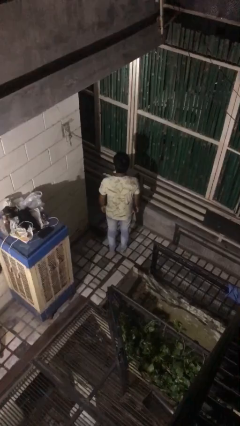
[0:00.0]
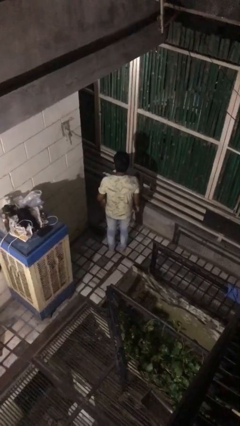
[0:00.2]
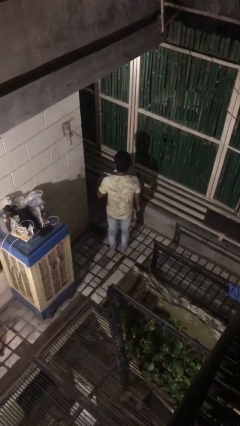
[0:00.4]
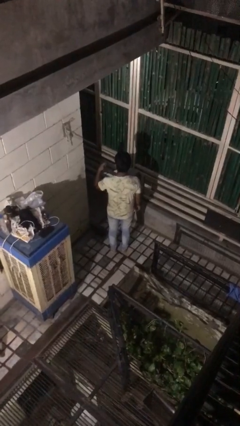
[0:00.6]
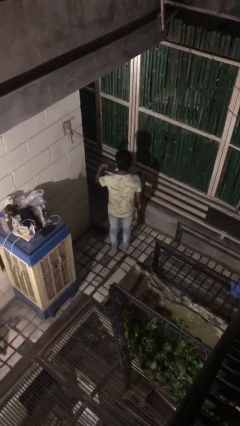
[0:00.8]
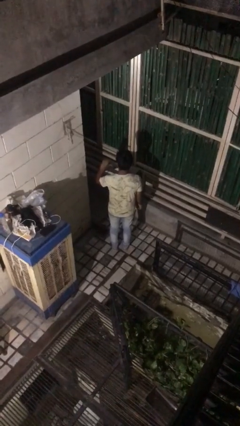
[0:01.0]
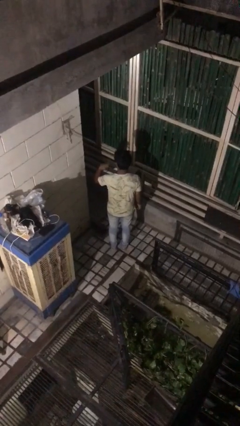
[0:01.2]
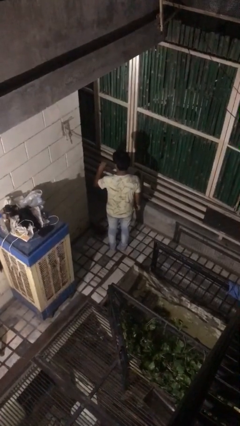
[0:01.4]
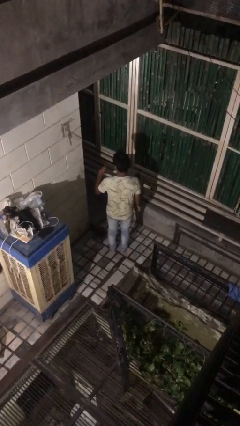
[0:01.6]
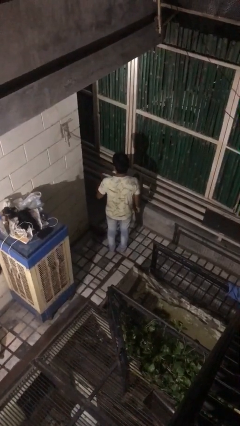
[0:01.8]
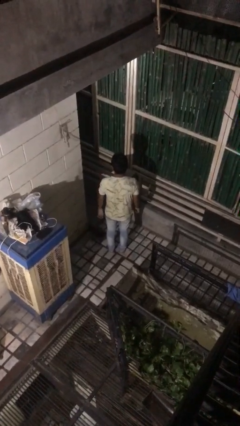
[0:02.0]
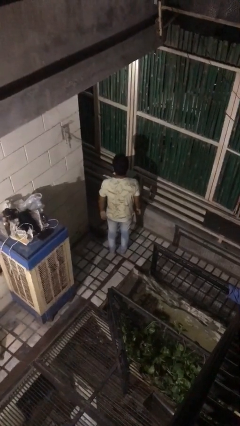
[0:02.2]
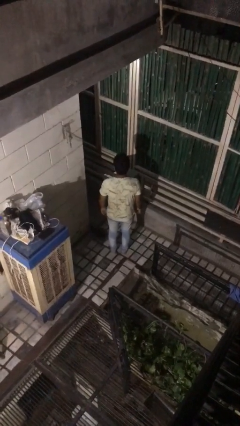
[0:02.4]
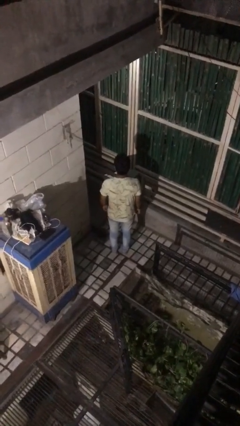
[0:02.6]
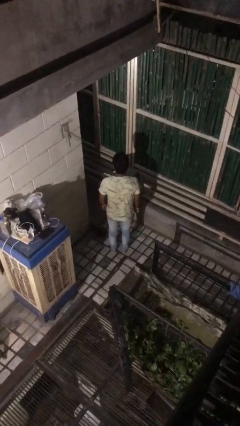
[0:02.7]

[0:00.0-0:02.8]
person gestures behind me

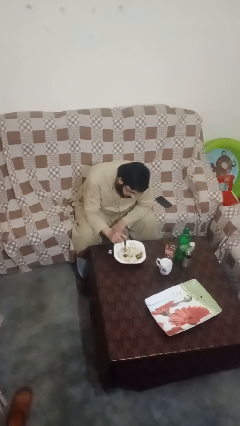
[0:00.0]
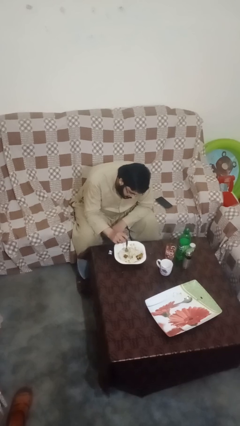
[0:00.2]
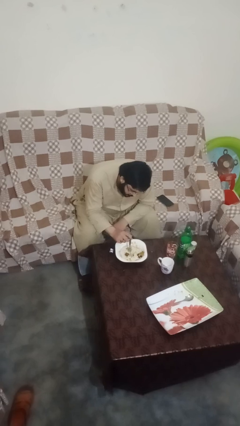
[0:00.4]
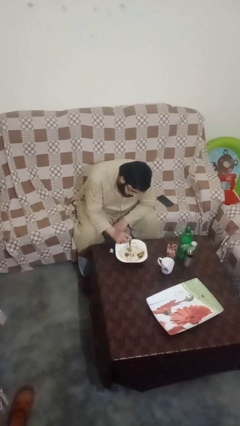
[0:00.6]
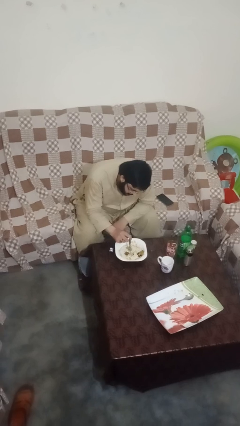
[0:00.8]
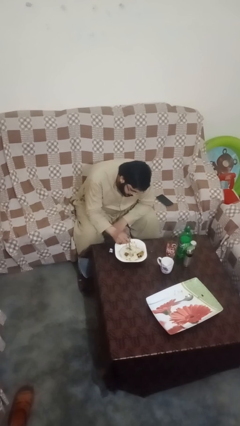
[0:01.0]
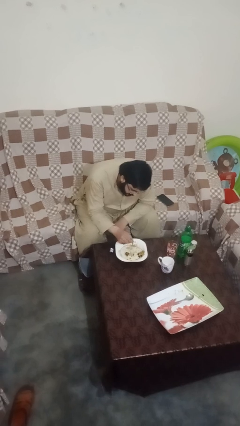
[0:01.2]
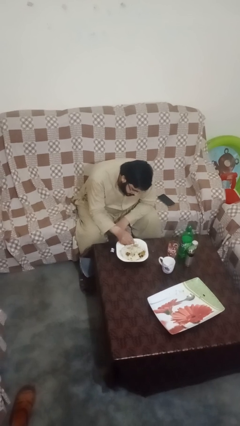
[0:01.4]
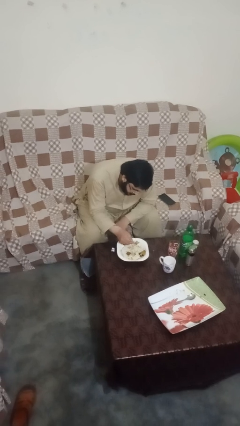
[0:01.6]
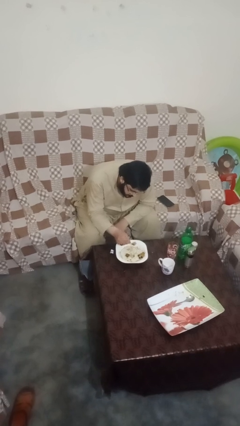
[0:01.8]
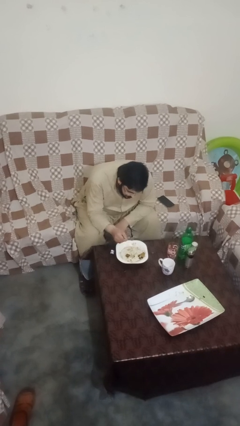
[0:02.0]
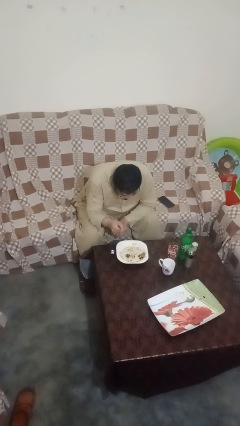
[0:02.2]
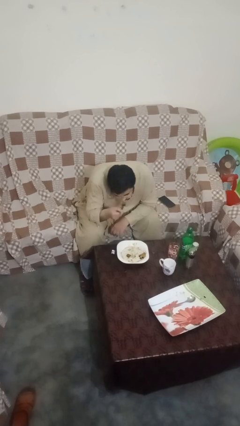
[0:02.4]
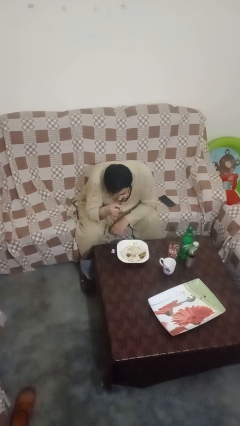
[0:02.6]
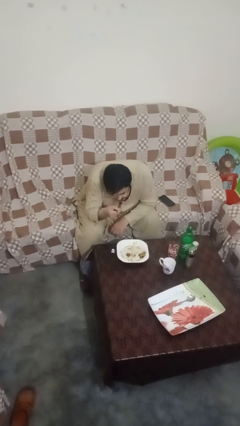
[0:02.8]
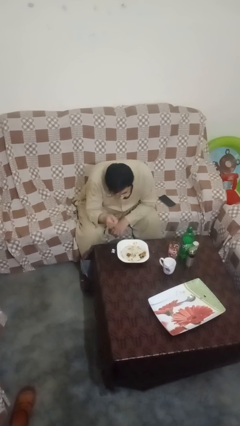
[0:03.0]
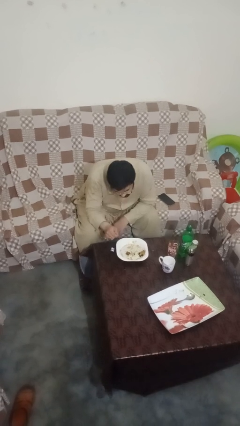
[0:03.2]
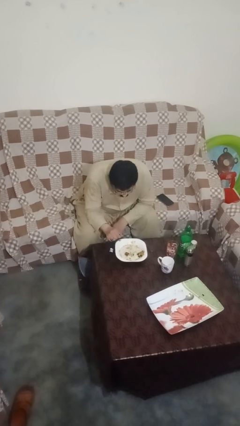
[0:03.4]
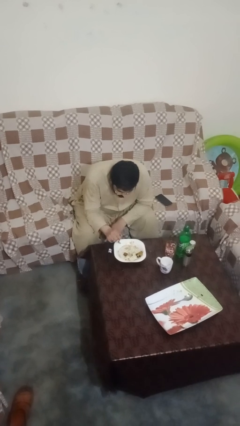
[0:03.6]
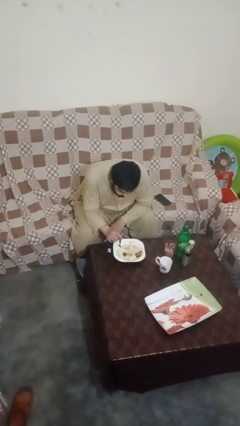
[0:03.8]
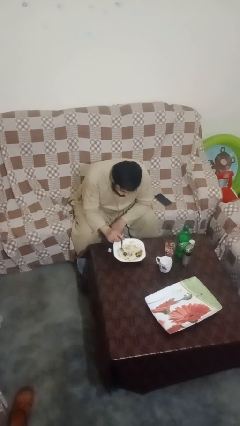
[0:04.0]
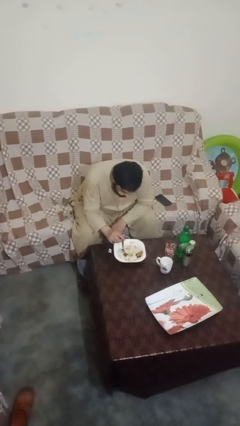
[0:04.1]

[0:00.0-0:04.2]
person eats with utensil

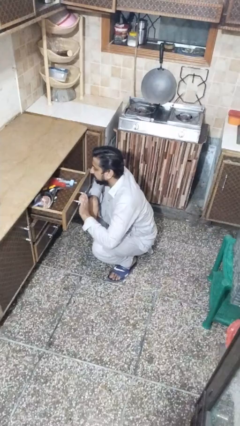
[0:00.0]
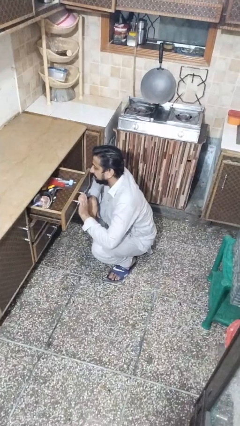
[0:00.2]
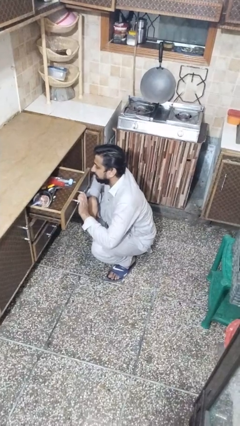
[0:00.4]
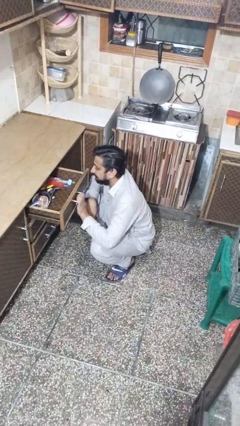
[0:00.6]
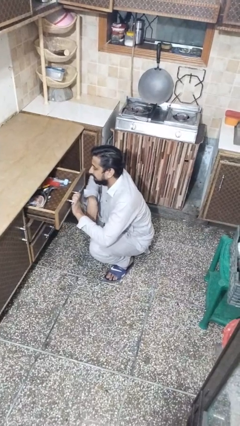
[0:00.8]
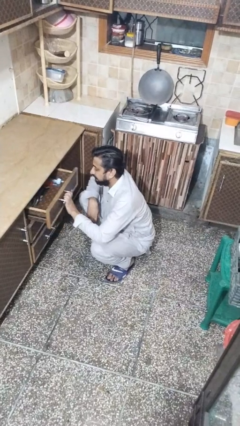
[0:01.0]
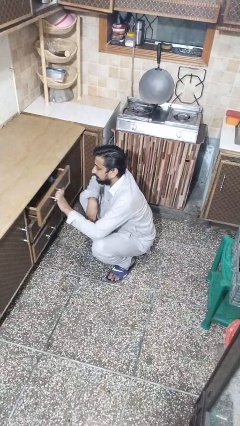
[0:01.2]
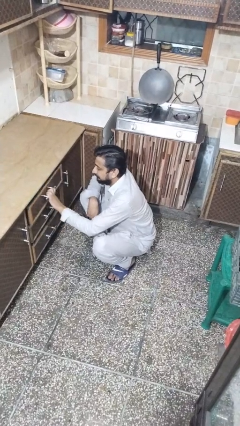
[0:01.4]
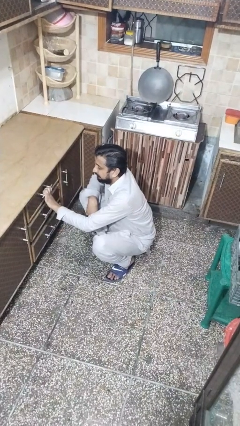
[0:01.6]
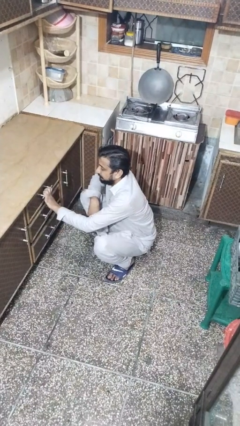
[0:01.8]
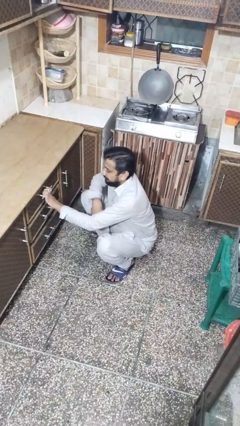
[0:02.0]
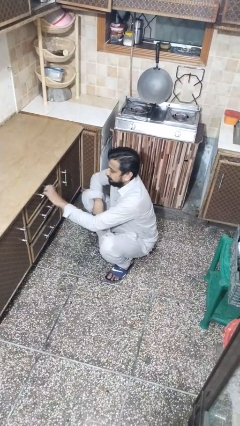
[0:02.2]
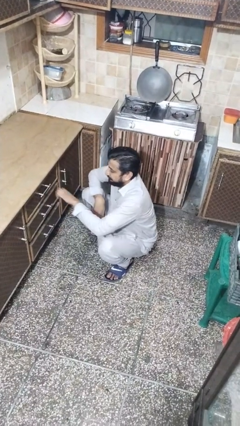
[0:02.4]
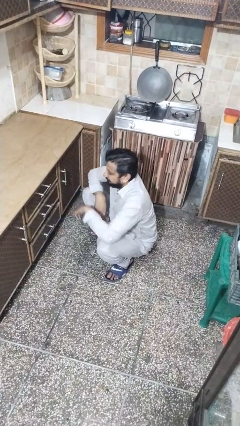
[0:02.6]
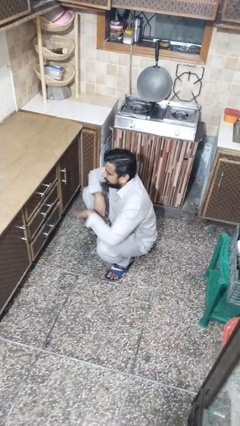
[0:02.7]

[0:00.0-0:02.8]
person closes kitchen drawer

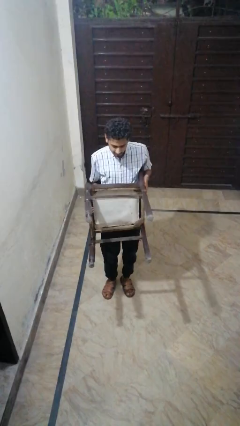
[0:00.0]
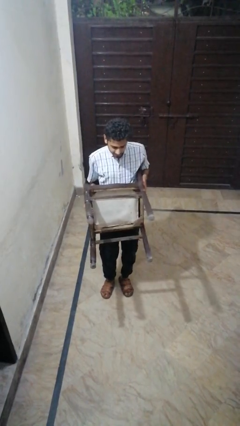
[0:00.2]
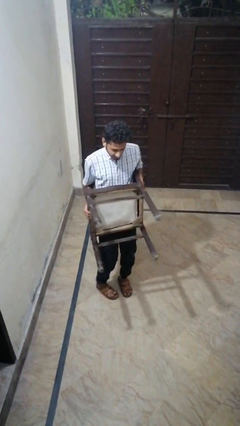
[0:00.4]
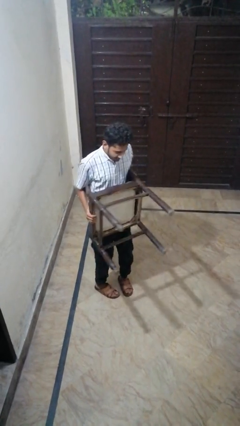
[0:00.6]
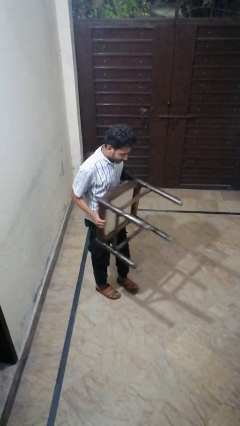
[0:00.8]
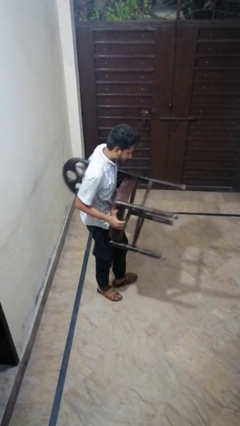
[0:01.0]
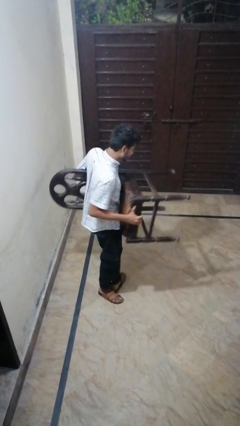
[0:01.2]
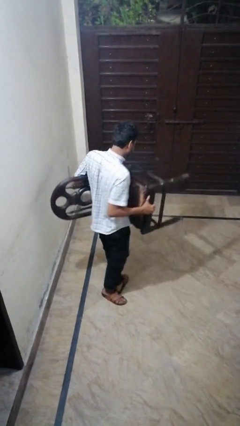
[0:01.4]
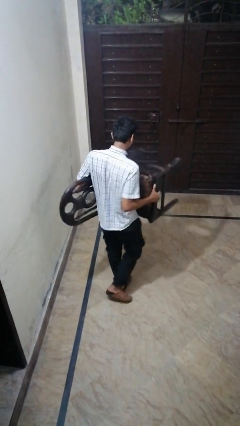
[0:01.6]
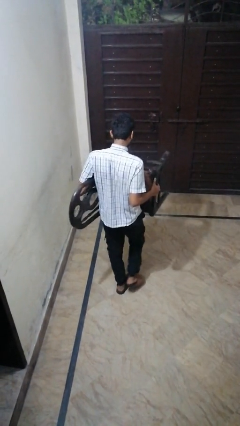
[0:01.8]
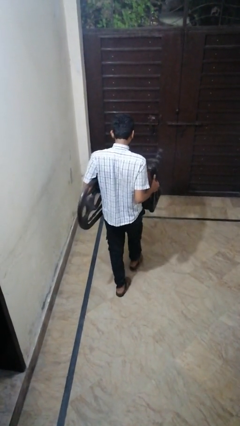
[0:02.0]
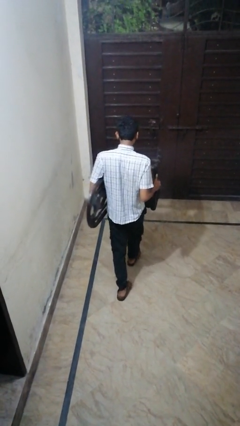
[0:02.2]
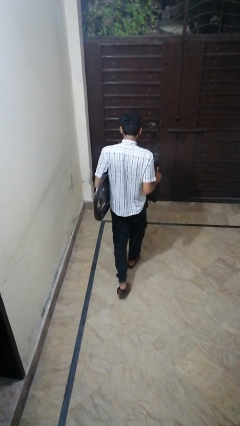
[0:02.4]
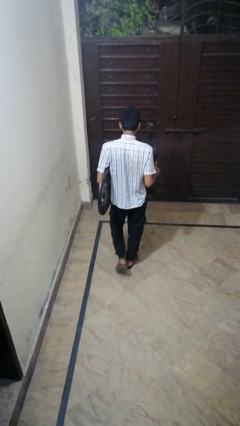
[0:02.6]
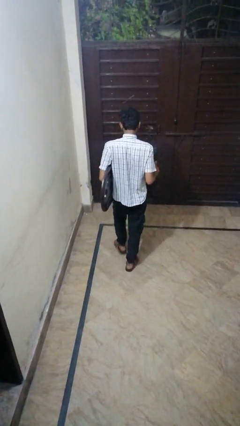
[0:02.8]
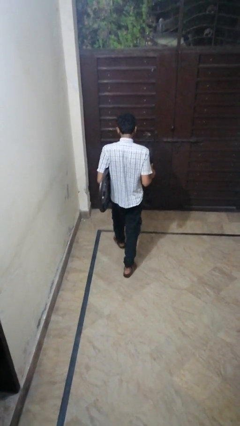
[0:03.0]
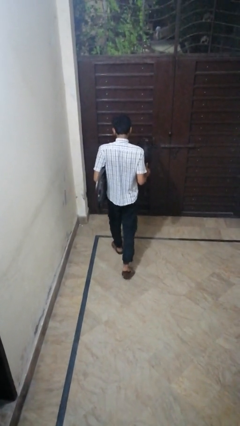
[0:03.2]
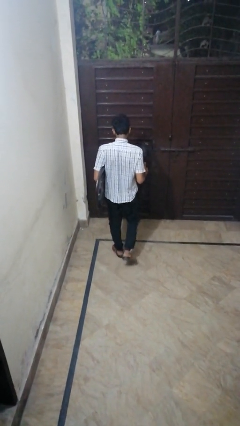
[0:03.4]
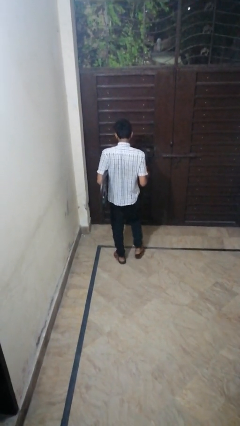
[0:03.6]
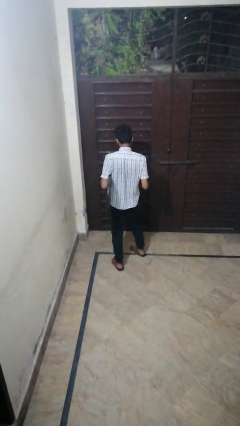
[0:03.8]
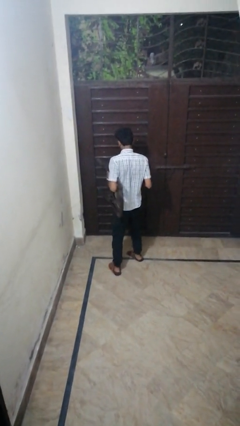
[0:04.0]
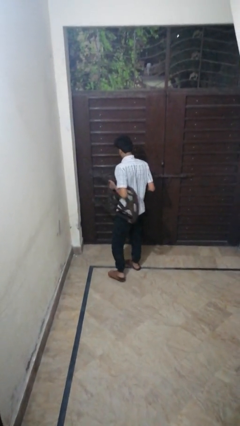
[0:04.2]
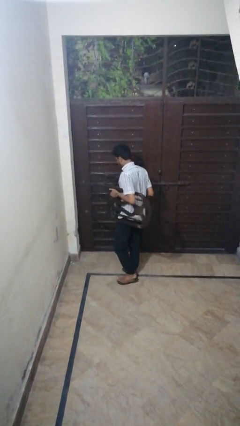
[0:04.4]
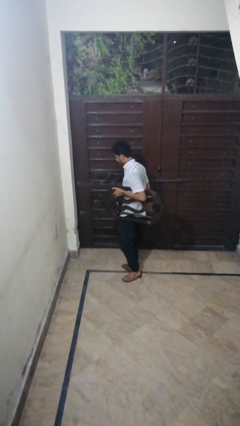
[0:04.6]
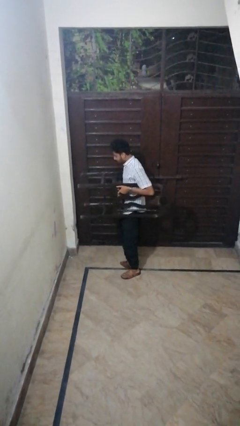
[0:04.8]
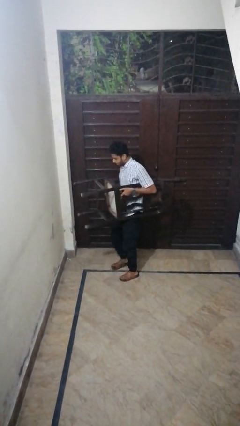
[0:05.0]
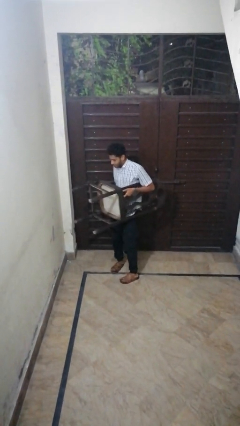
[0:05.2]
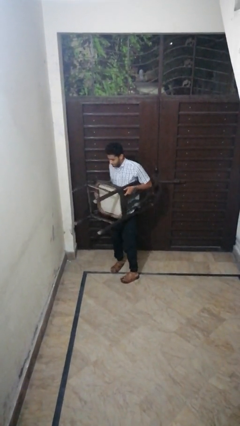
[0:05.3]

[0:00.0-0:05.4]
person carries furniture

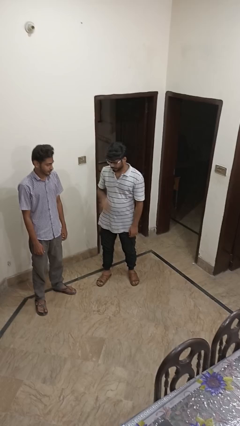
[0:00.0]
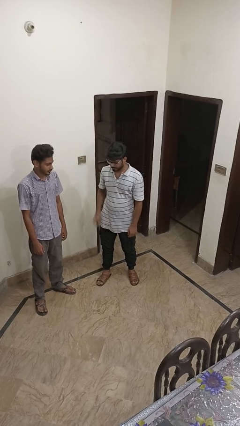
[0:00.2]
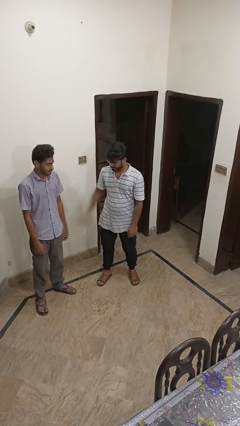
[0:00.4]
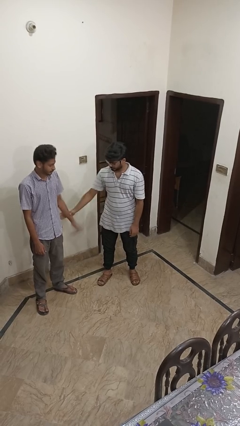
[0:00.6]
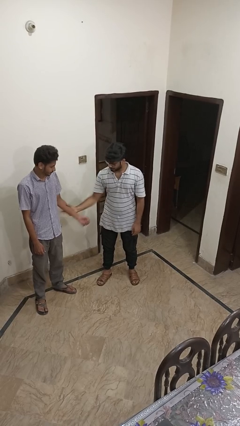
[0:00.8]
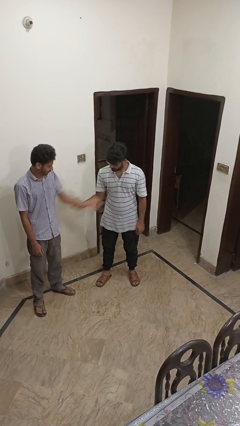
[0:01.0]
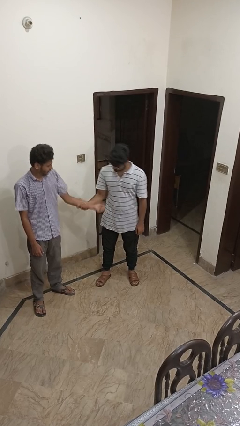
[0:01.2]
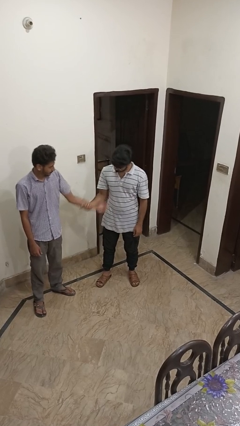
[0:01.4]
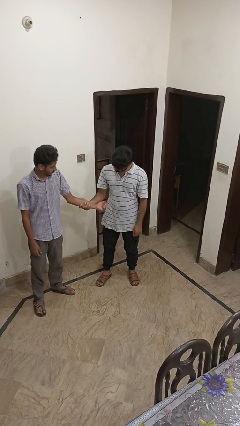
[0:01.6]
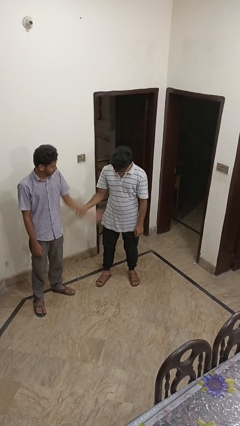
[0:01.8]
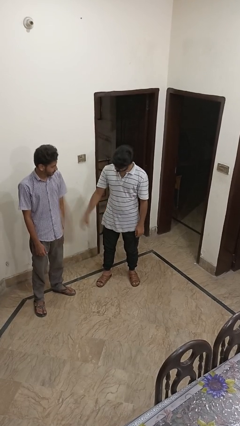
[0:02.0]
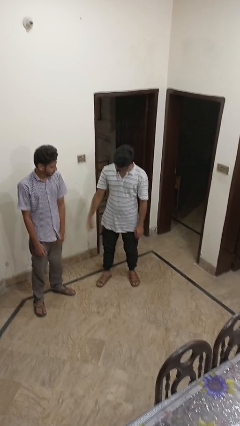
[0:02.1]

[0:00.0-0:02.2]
person grabs person by forearm

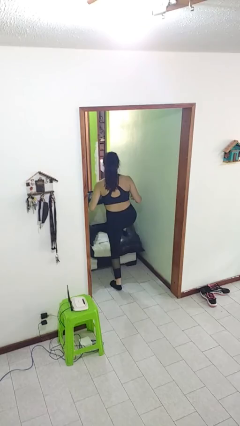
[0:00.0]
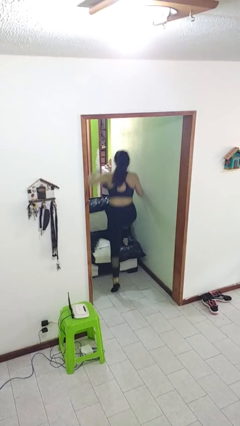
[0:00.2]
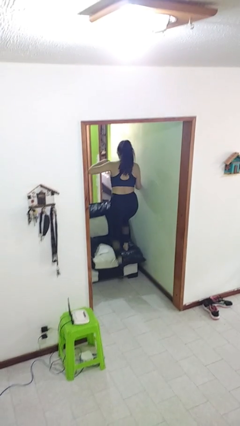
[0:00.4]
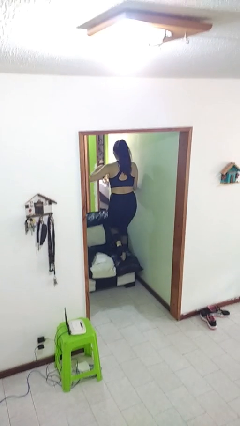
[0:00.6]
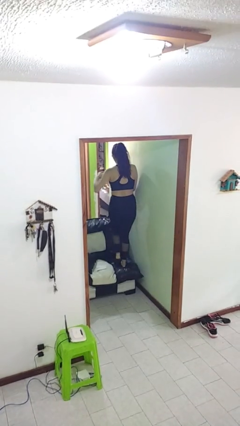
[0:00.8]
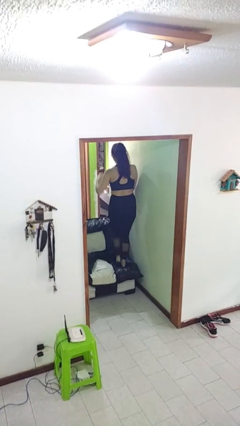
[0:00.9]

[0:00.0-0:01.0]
person climbs on couch
